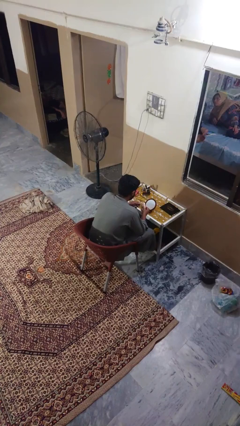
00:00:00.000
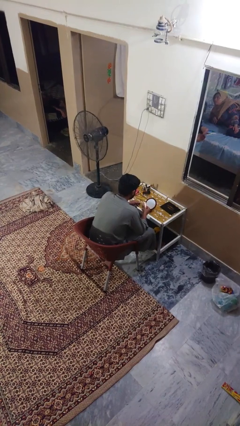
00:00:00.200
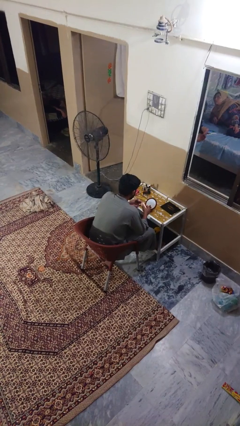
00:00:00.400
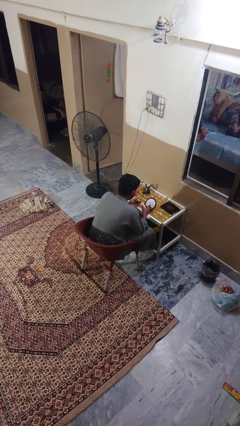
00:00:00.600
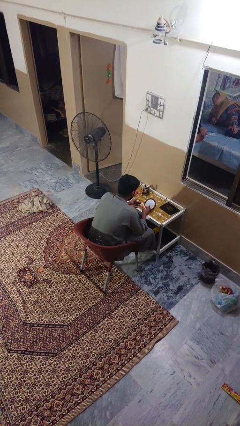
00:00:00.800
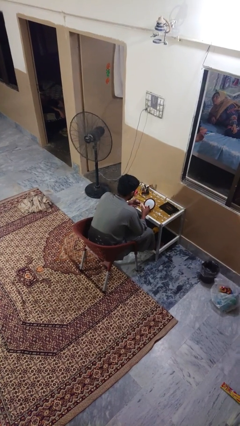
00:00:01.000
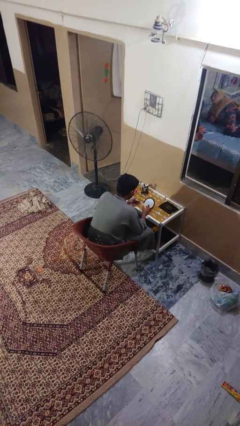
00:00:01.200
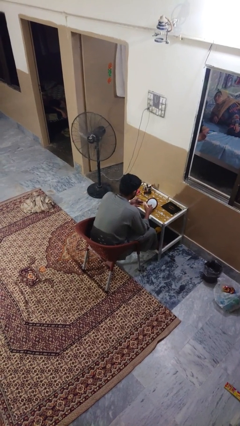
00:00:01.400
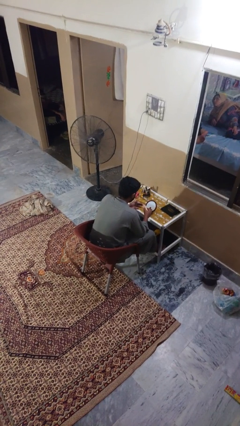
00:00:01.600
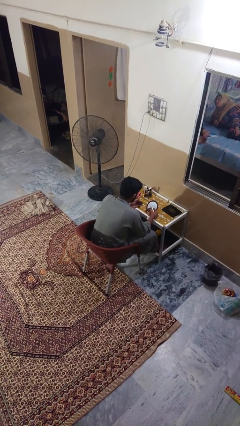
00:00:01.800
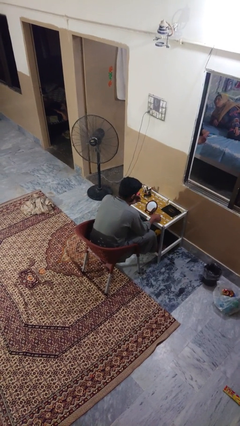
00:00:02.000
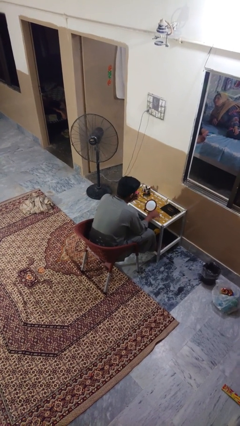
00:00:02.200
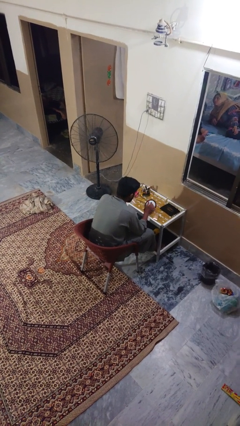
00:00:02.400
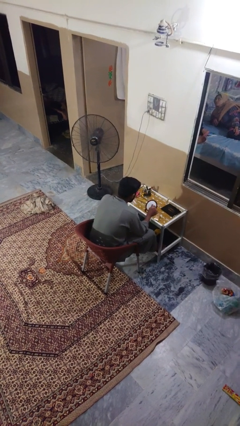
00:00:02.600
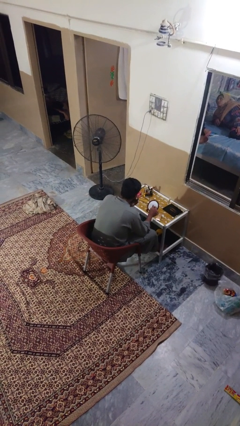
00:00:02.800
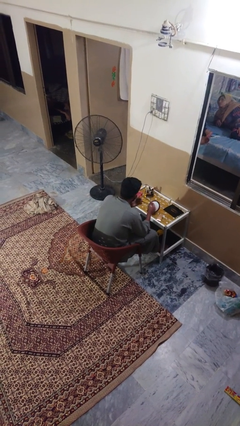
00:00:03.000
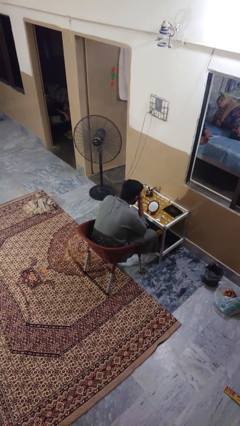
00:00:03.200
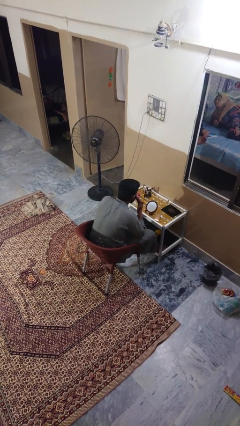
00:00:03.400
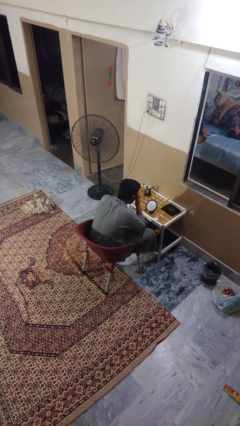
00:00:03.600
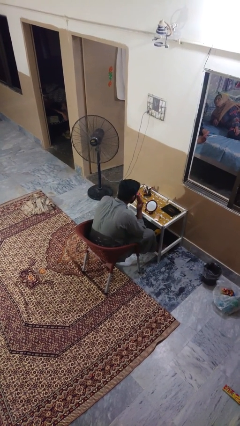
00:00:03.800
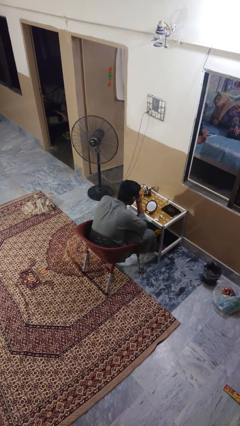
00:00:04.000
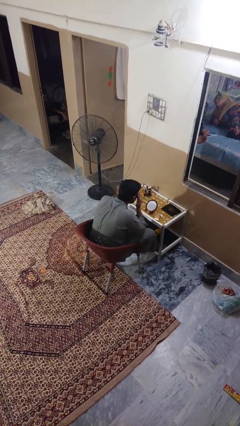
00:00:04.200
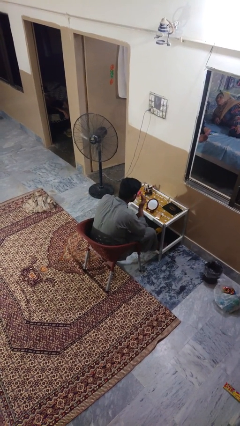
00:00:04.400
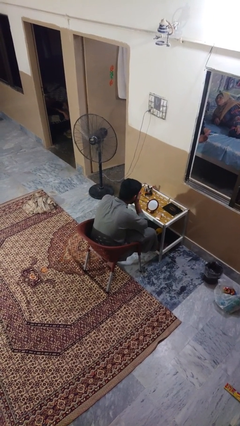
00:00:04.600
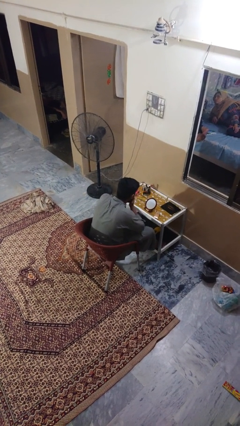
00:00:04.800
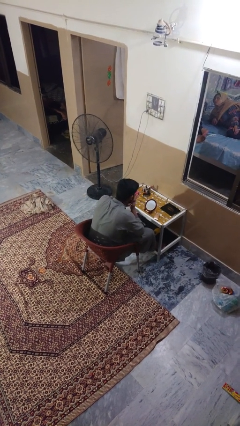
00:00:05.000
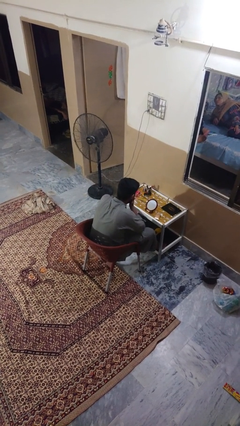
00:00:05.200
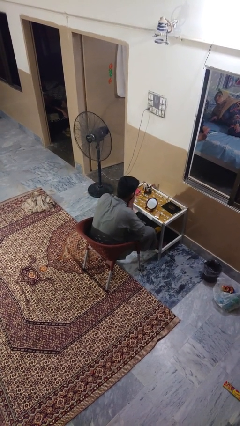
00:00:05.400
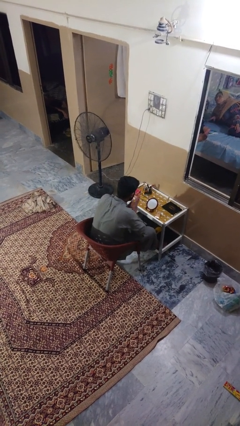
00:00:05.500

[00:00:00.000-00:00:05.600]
person applies foundation makeup

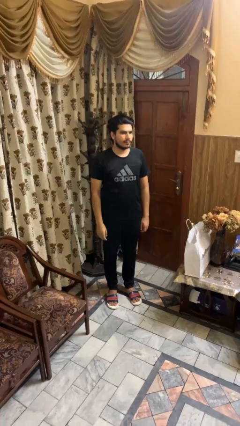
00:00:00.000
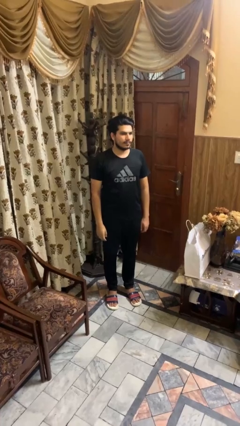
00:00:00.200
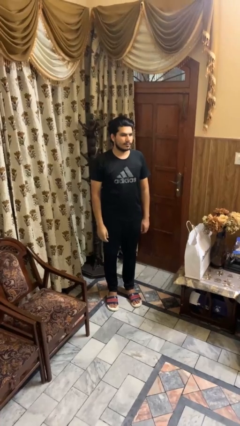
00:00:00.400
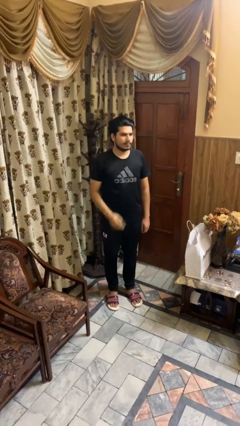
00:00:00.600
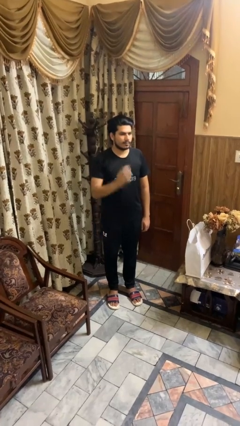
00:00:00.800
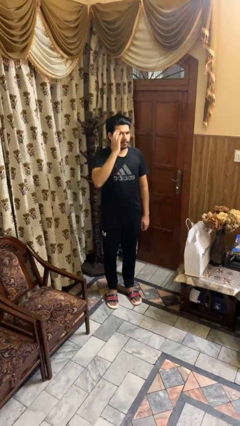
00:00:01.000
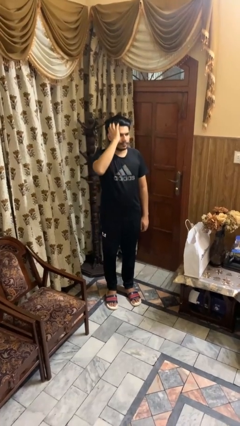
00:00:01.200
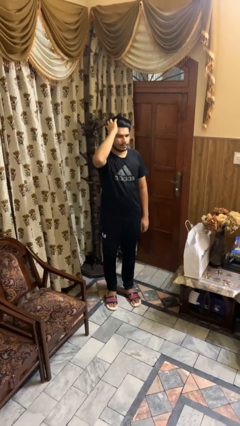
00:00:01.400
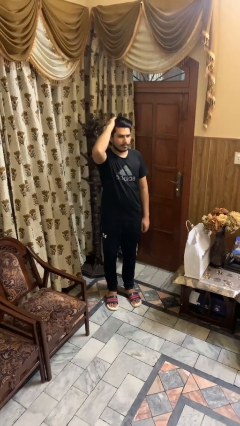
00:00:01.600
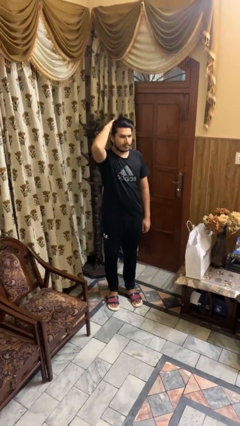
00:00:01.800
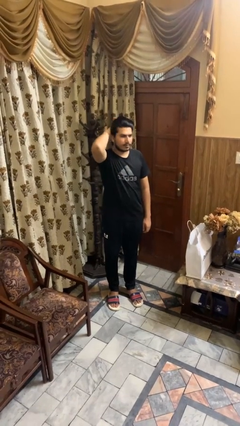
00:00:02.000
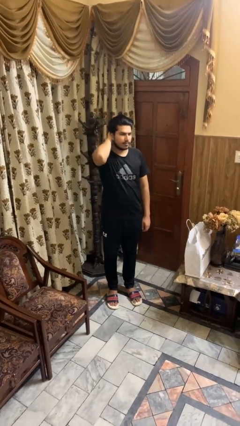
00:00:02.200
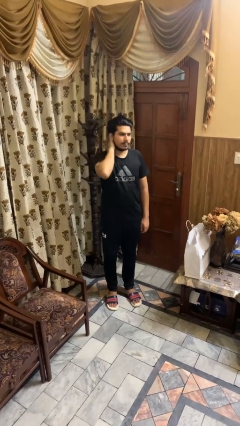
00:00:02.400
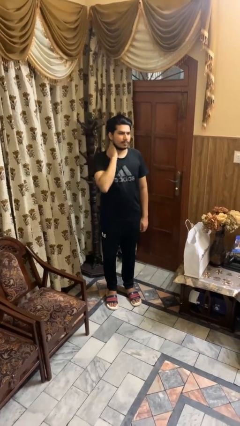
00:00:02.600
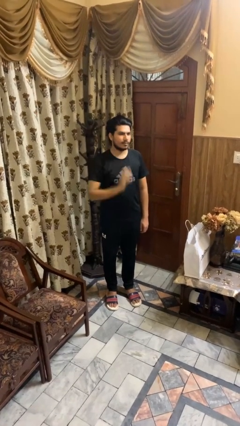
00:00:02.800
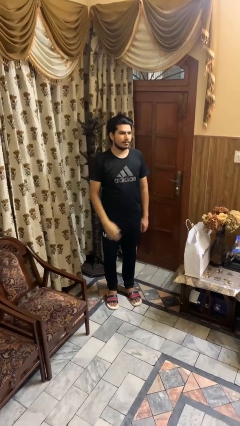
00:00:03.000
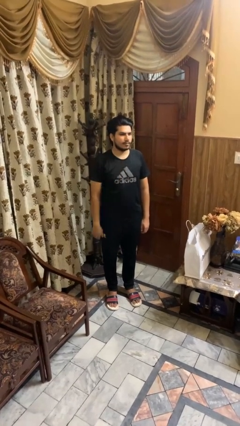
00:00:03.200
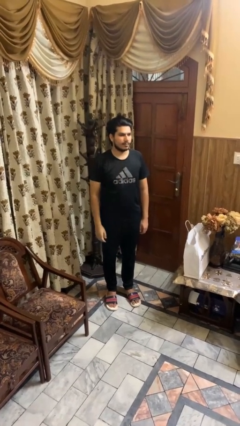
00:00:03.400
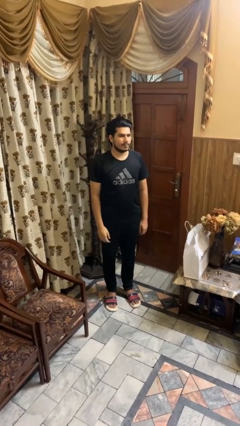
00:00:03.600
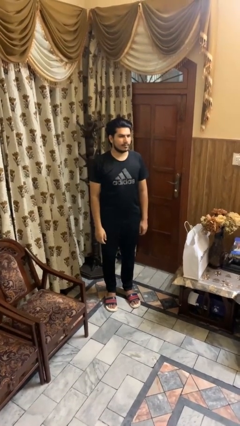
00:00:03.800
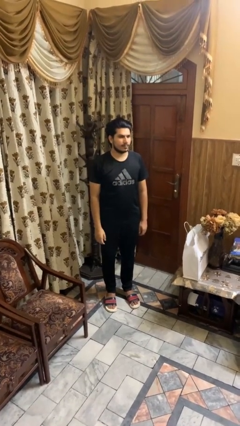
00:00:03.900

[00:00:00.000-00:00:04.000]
person strokes hair

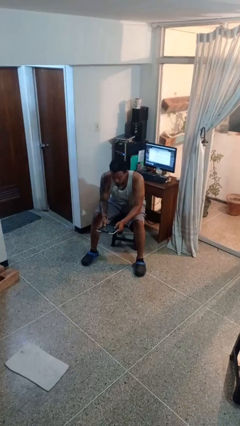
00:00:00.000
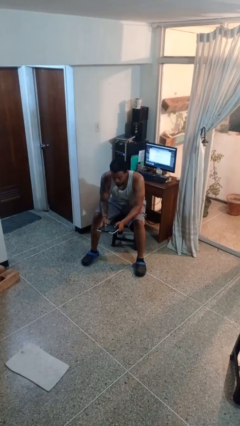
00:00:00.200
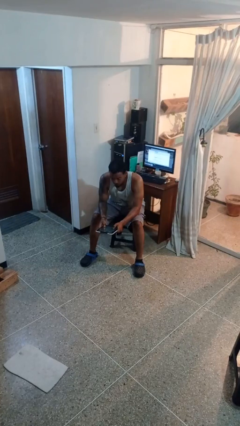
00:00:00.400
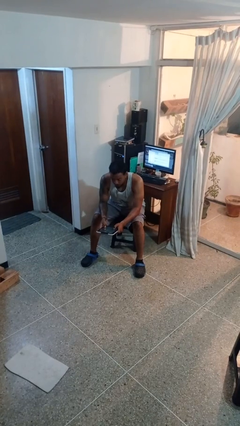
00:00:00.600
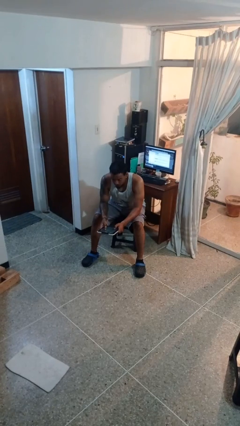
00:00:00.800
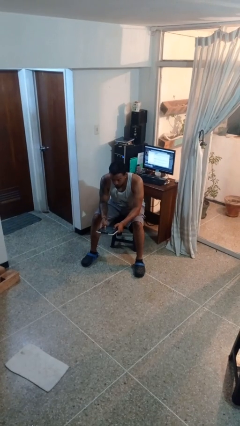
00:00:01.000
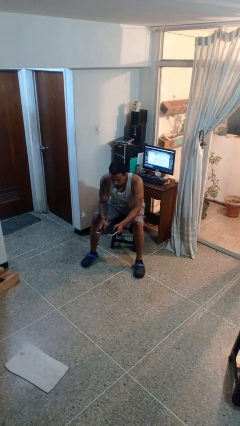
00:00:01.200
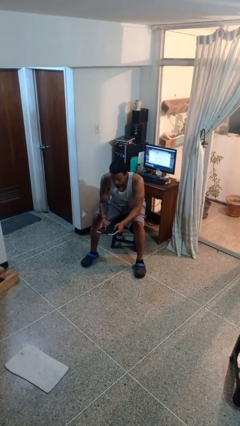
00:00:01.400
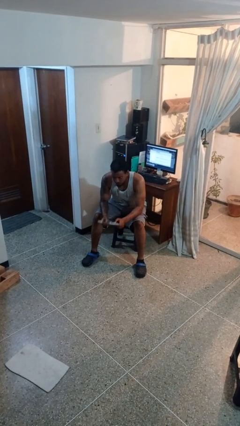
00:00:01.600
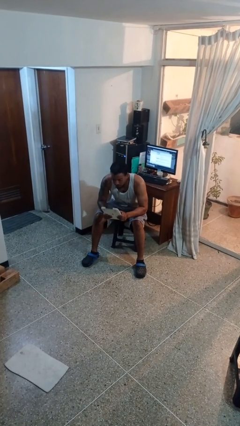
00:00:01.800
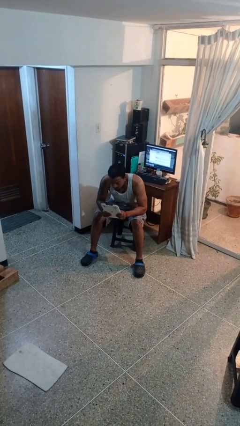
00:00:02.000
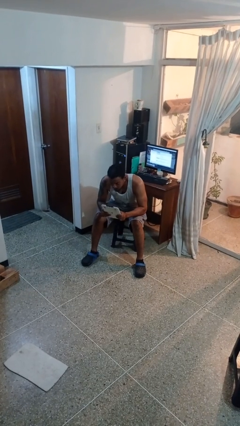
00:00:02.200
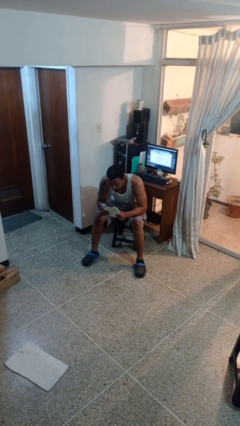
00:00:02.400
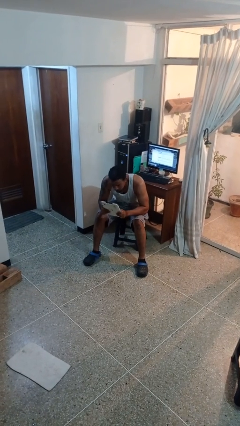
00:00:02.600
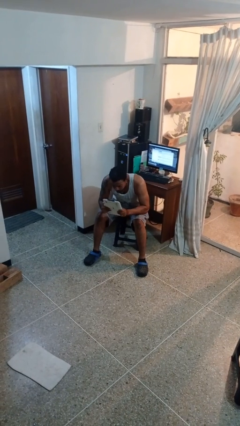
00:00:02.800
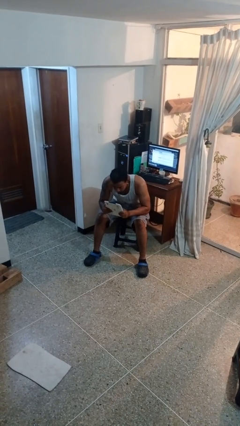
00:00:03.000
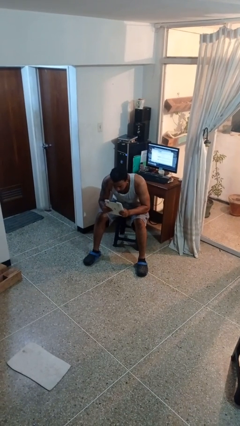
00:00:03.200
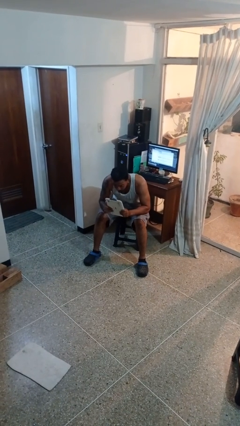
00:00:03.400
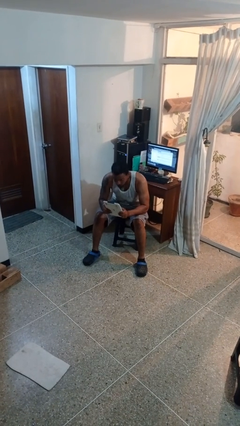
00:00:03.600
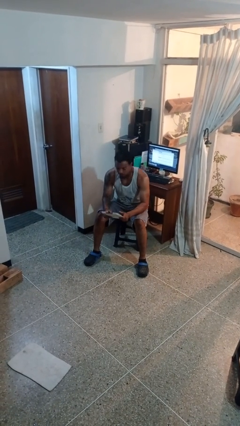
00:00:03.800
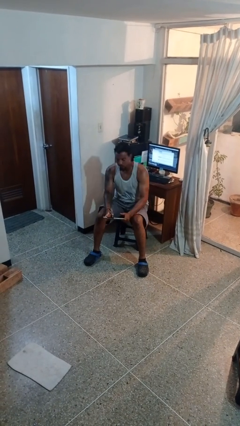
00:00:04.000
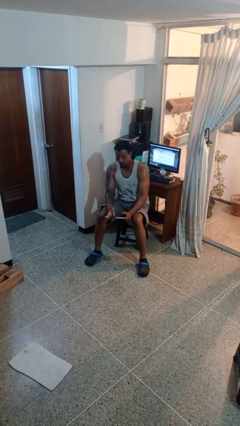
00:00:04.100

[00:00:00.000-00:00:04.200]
person interacts with tablet

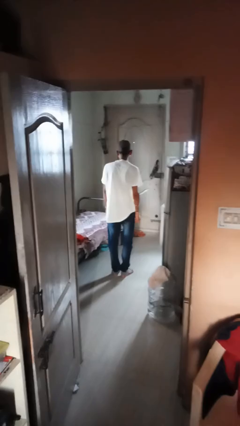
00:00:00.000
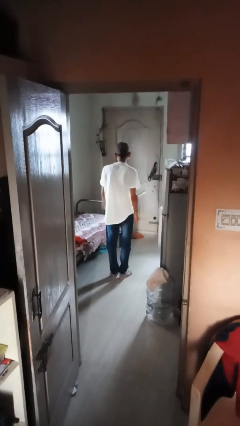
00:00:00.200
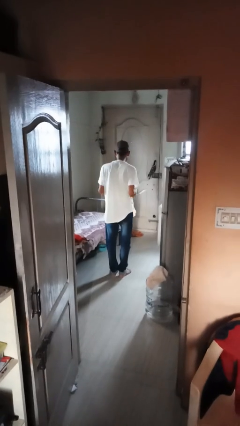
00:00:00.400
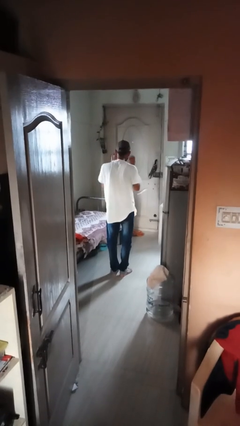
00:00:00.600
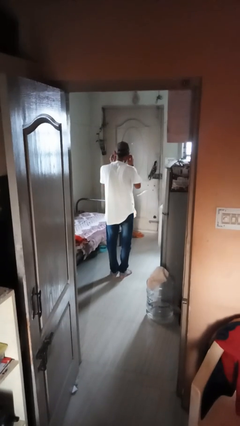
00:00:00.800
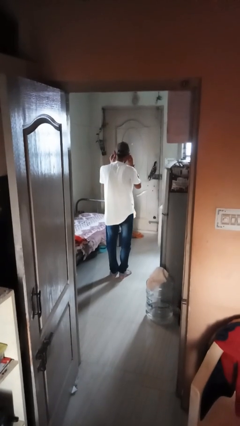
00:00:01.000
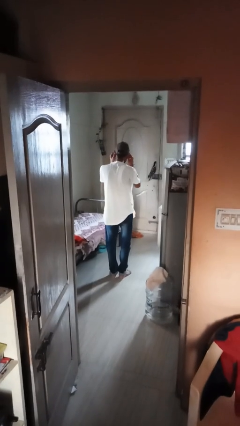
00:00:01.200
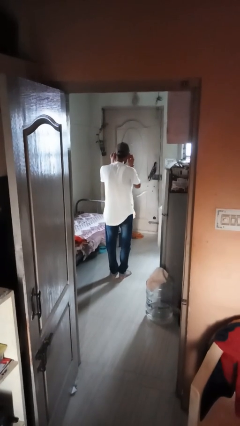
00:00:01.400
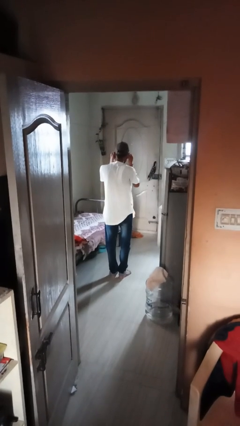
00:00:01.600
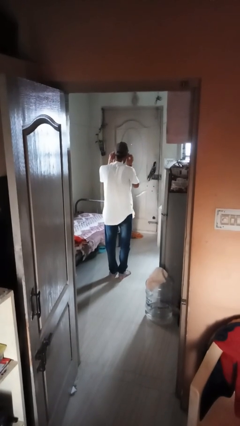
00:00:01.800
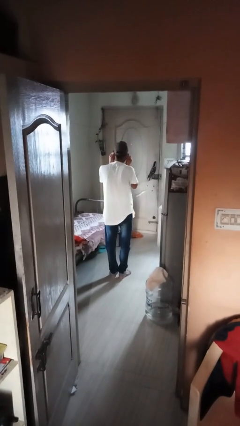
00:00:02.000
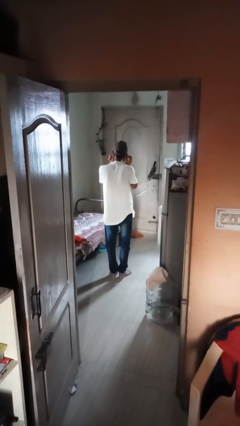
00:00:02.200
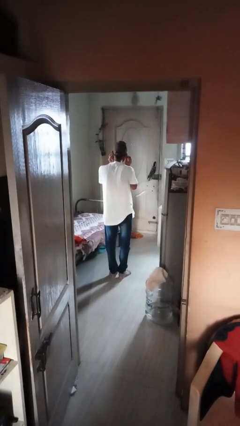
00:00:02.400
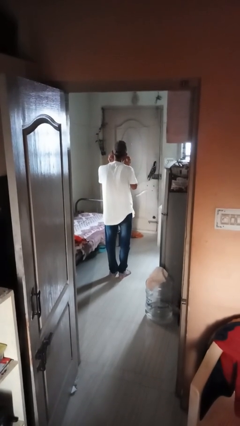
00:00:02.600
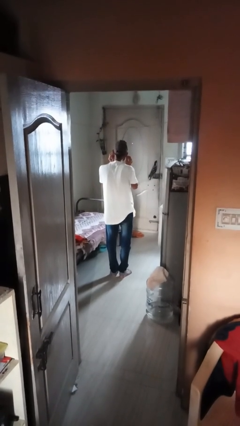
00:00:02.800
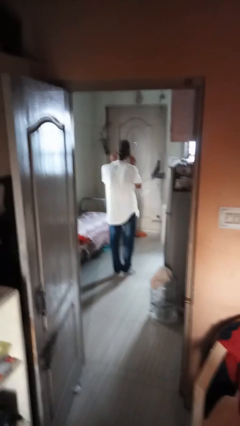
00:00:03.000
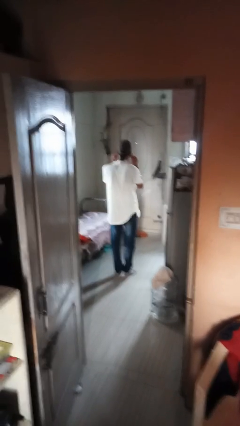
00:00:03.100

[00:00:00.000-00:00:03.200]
person touches earlobe

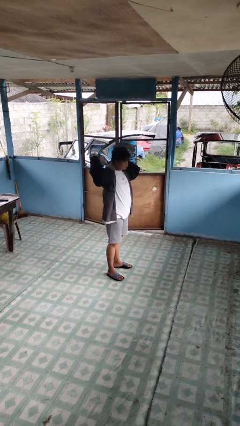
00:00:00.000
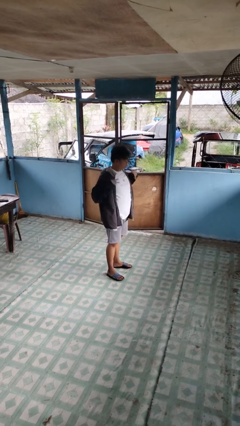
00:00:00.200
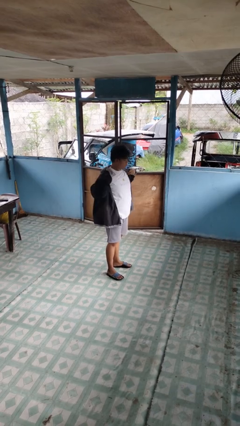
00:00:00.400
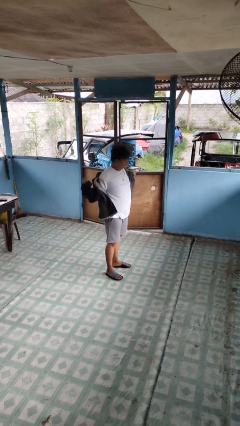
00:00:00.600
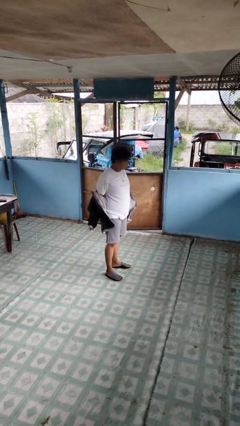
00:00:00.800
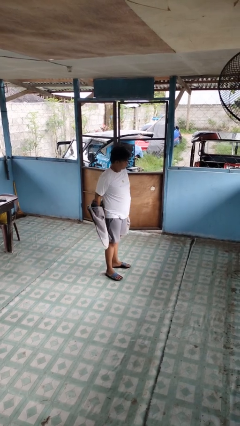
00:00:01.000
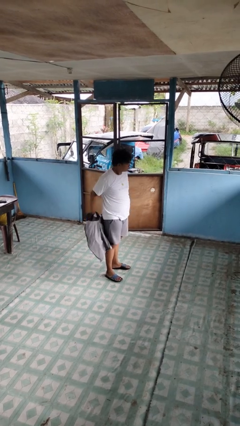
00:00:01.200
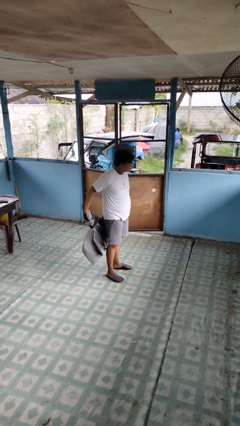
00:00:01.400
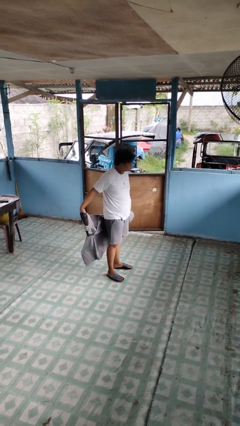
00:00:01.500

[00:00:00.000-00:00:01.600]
person takes off hoodie
